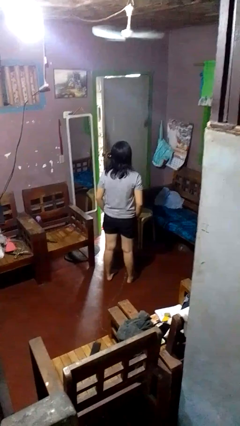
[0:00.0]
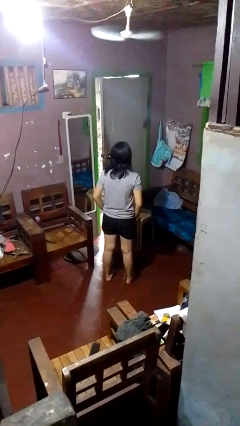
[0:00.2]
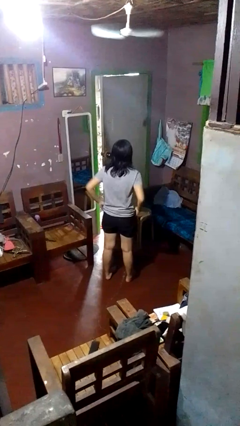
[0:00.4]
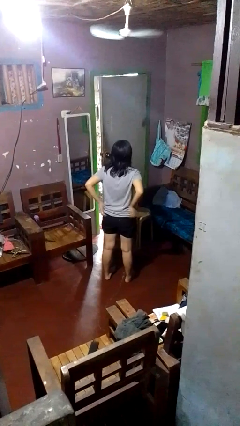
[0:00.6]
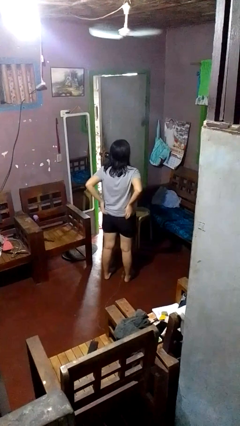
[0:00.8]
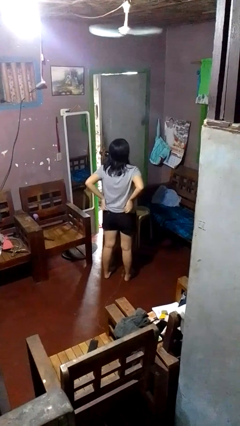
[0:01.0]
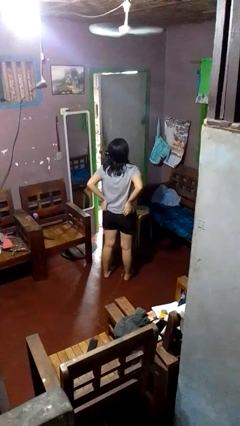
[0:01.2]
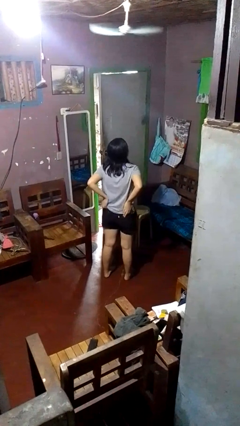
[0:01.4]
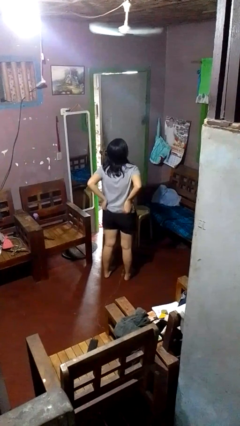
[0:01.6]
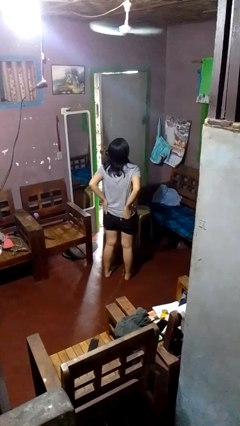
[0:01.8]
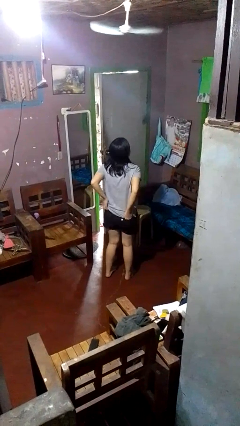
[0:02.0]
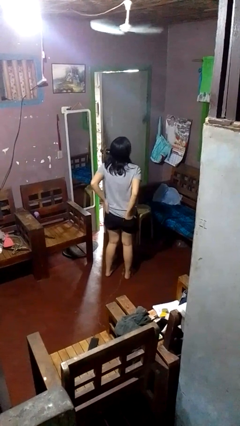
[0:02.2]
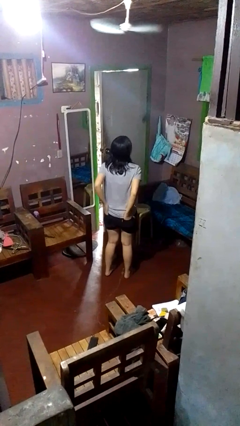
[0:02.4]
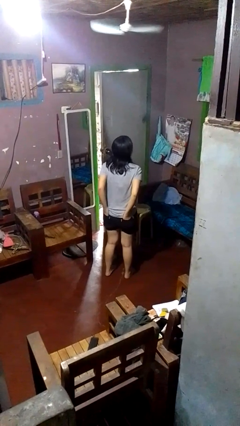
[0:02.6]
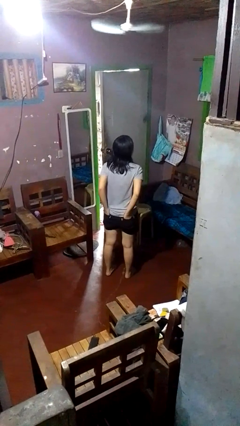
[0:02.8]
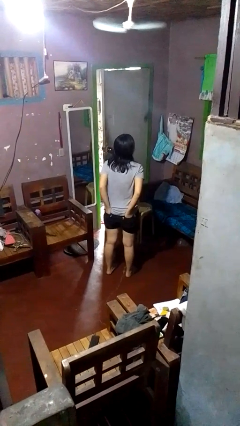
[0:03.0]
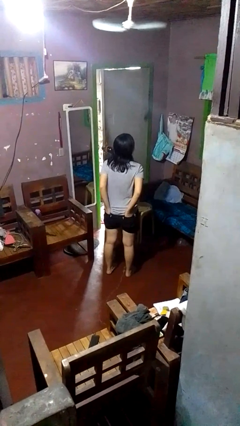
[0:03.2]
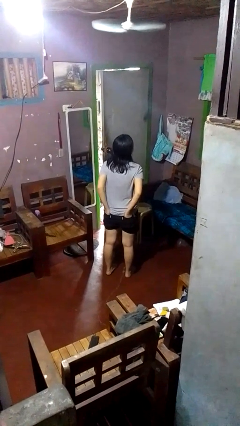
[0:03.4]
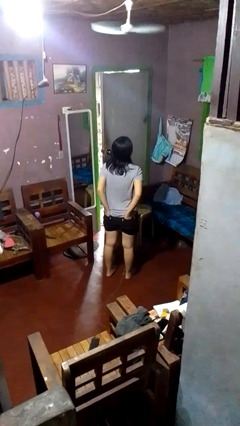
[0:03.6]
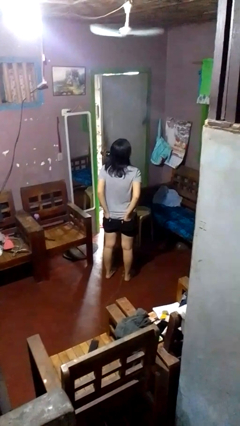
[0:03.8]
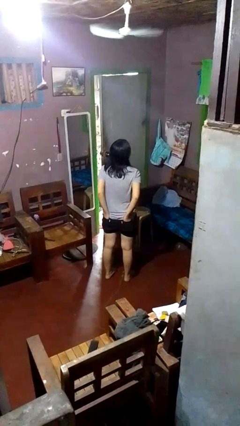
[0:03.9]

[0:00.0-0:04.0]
person puts hands in back pockets

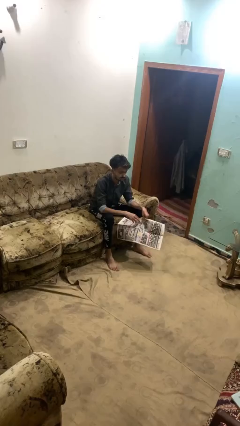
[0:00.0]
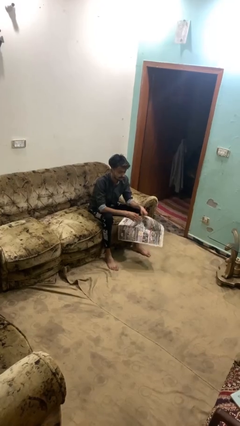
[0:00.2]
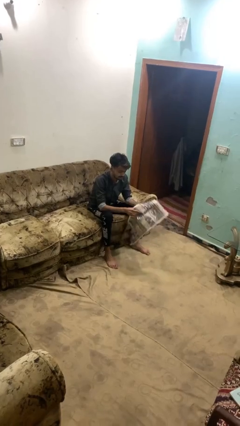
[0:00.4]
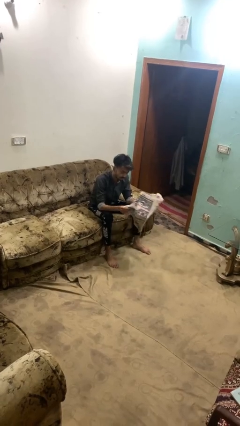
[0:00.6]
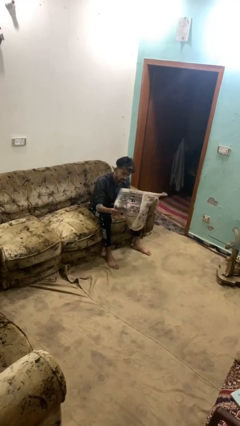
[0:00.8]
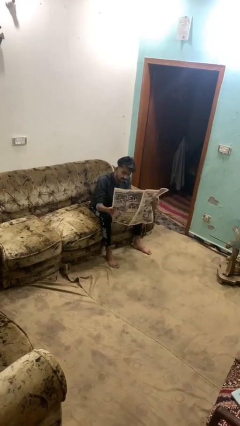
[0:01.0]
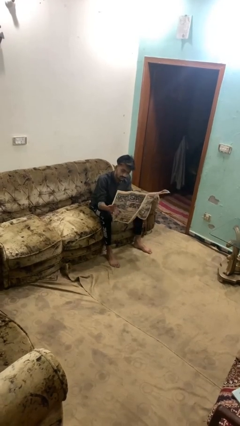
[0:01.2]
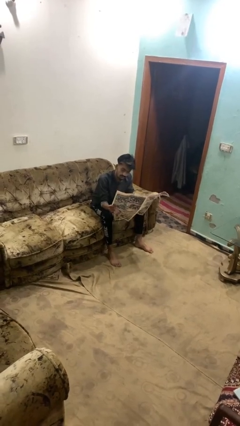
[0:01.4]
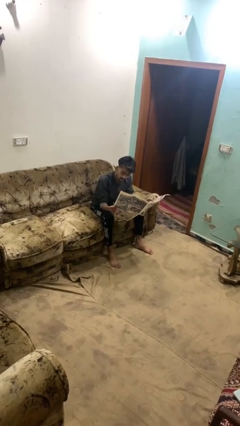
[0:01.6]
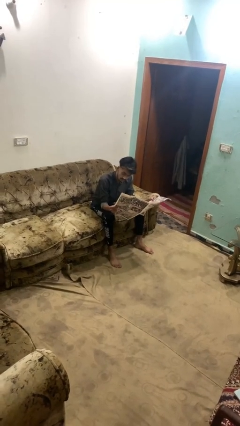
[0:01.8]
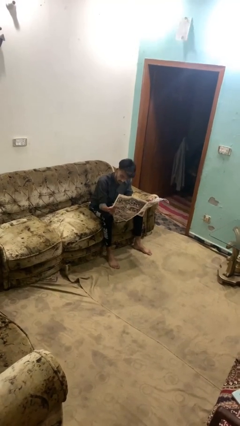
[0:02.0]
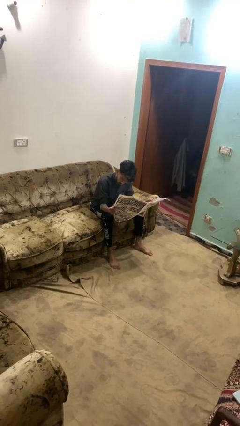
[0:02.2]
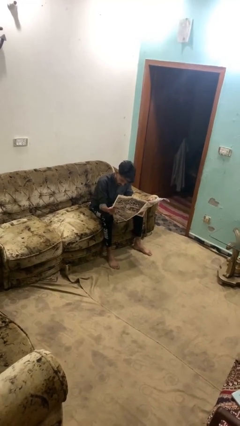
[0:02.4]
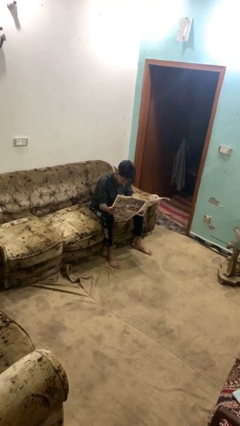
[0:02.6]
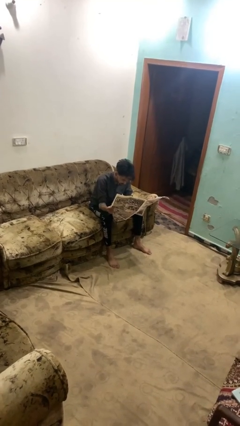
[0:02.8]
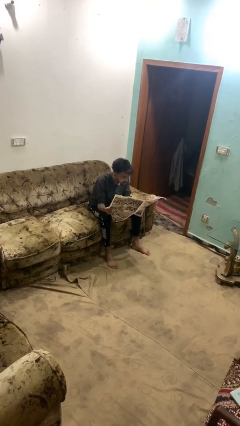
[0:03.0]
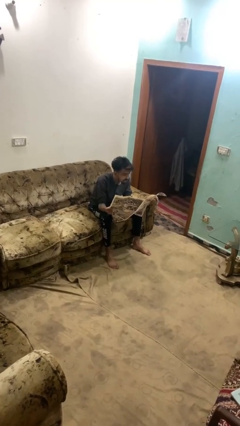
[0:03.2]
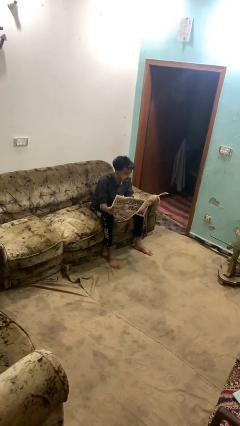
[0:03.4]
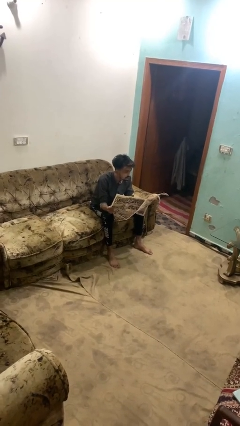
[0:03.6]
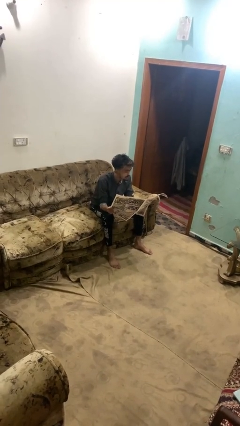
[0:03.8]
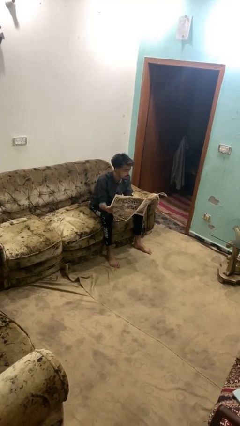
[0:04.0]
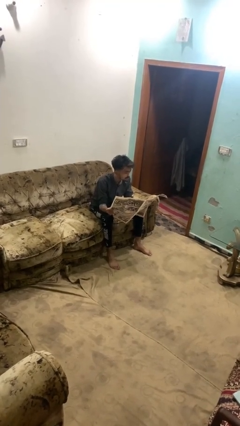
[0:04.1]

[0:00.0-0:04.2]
person reads newspaper

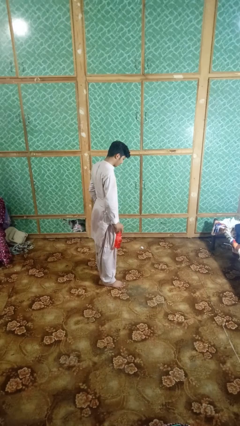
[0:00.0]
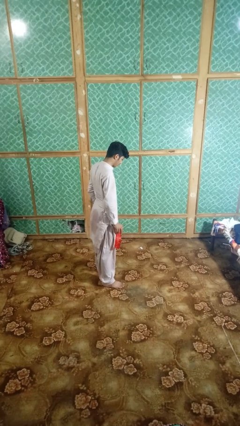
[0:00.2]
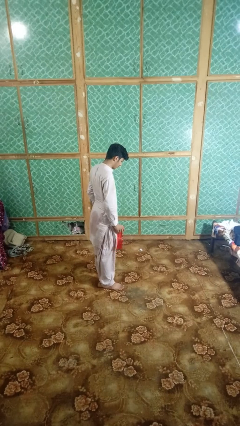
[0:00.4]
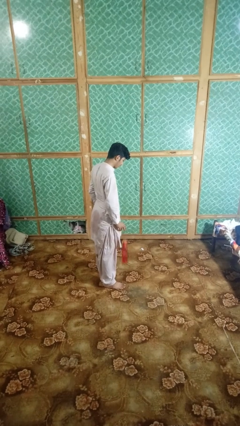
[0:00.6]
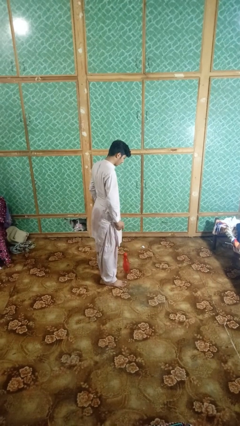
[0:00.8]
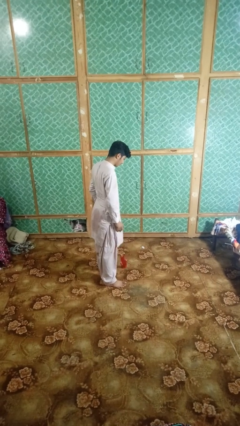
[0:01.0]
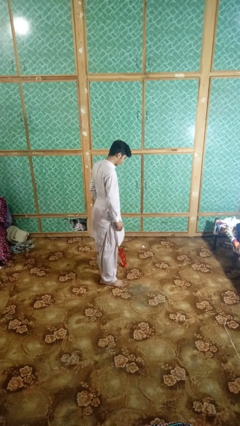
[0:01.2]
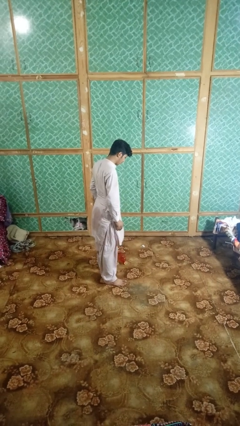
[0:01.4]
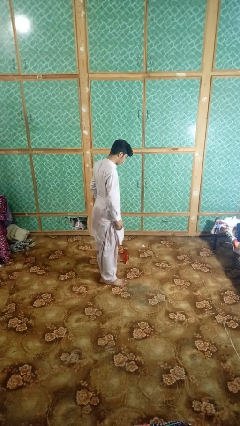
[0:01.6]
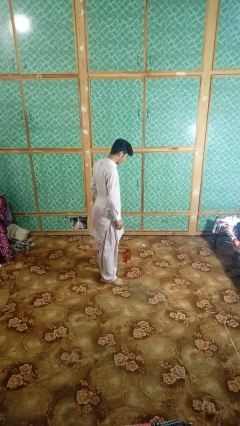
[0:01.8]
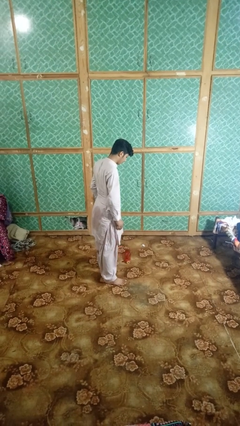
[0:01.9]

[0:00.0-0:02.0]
person drops object

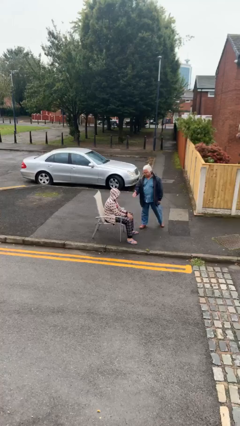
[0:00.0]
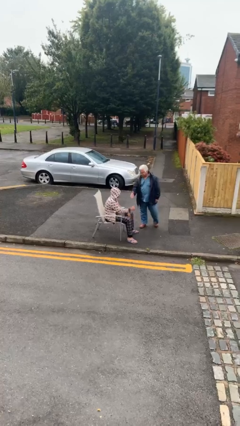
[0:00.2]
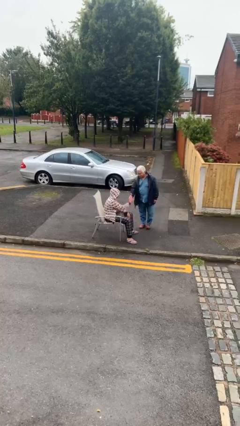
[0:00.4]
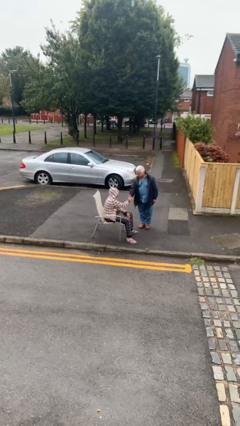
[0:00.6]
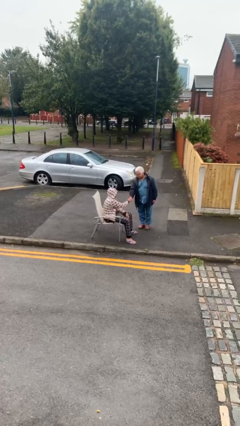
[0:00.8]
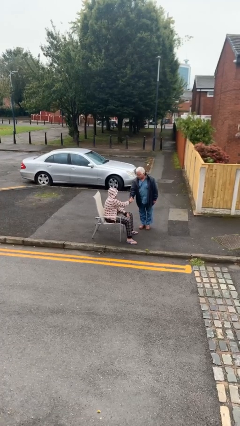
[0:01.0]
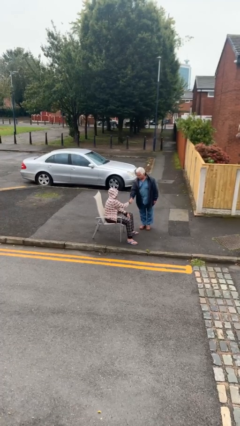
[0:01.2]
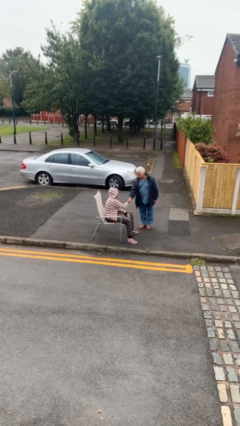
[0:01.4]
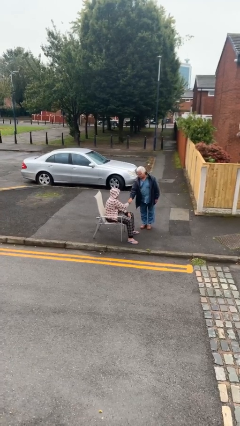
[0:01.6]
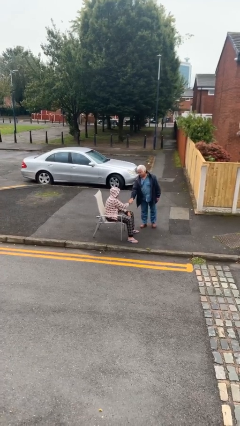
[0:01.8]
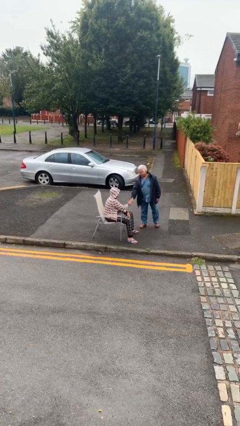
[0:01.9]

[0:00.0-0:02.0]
person shakes hand

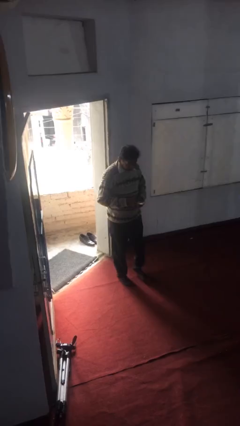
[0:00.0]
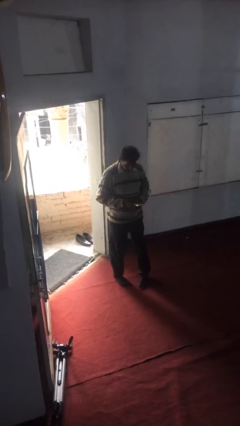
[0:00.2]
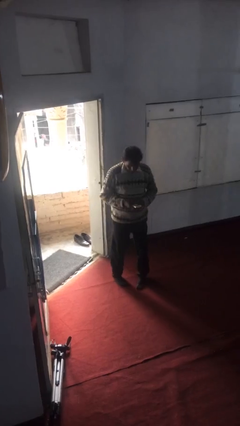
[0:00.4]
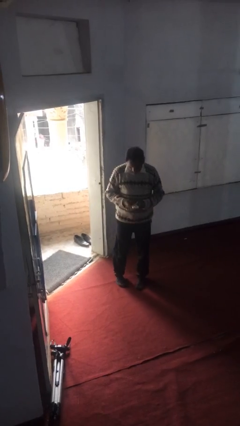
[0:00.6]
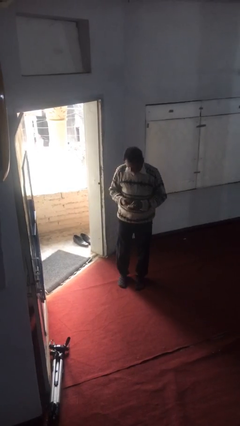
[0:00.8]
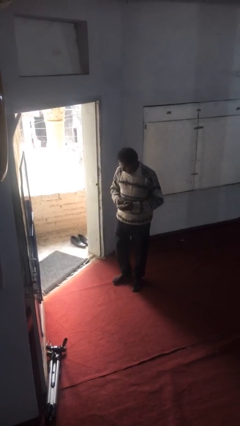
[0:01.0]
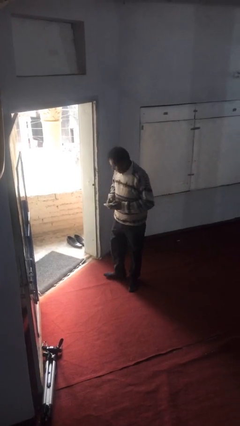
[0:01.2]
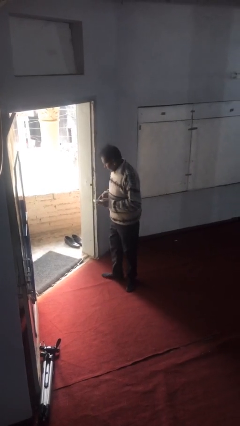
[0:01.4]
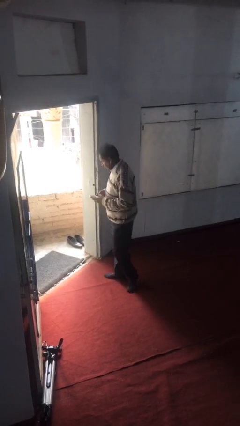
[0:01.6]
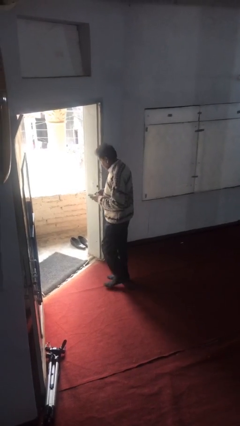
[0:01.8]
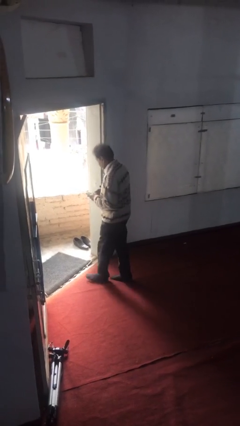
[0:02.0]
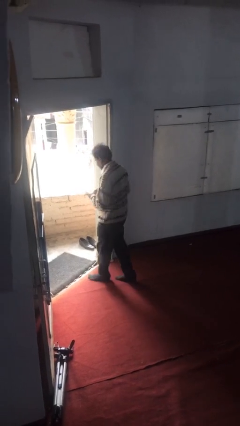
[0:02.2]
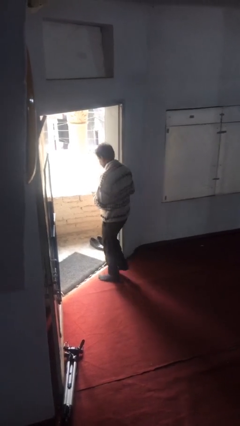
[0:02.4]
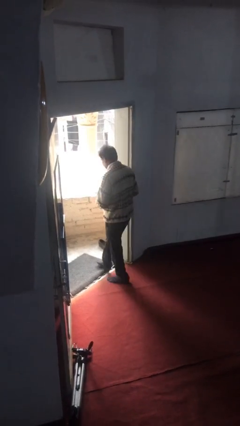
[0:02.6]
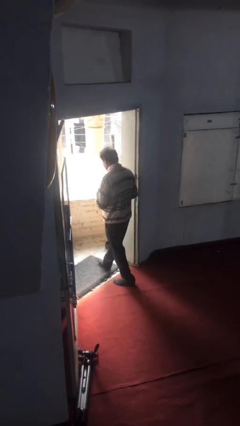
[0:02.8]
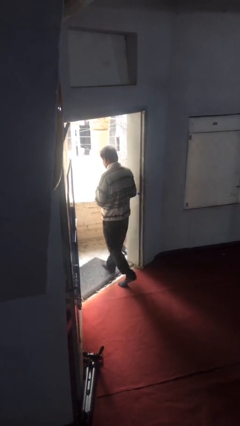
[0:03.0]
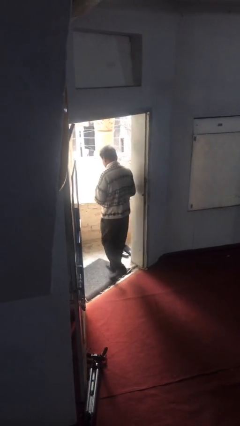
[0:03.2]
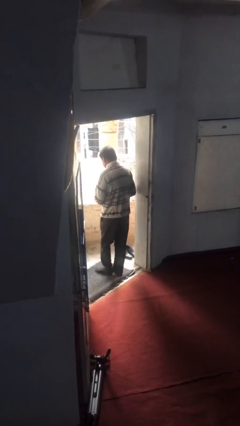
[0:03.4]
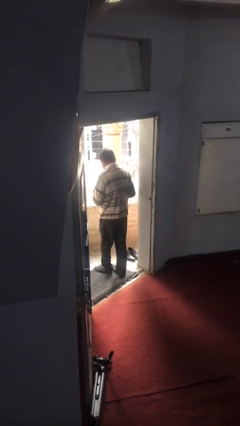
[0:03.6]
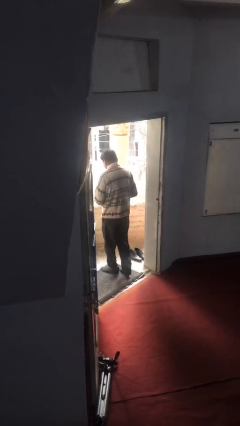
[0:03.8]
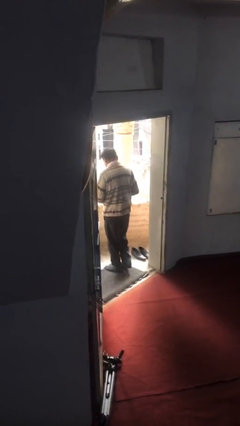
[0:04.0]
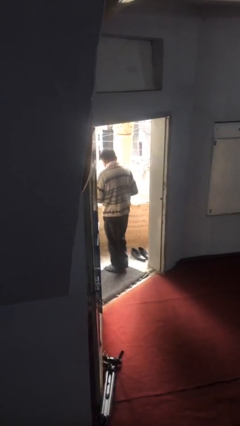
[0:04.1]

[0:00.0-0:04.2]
person exits scene through structure

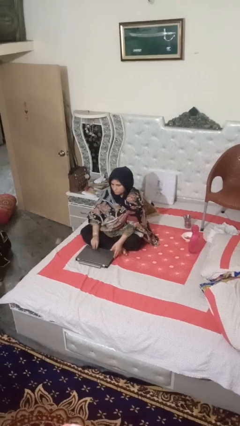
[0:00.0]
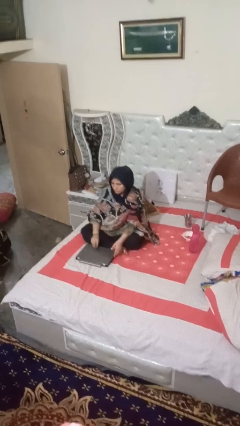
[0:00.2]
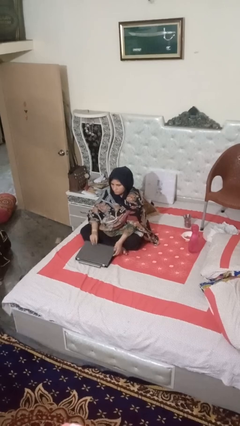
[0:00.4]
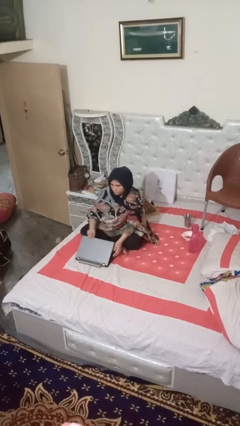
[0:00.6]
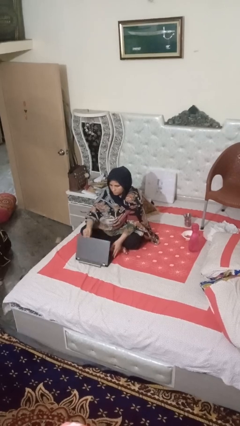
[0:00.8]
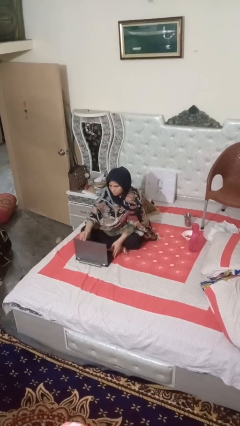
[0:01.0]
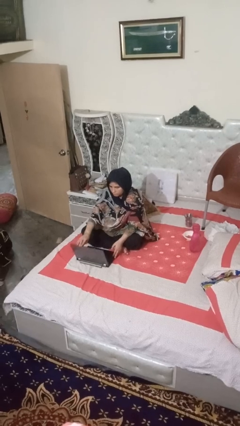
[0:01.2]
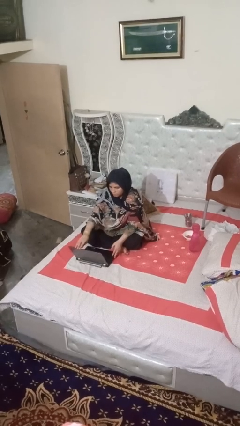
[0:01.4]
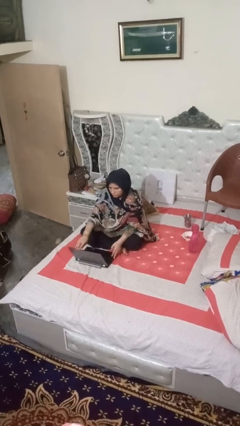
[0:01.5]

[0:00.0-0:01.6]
person opens laptop
